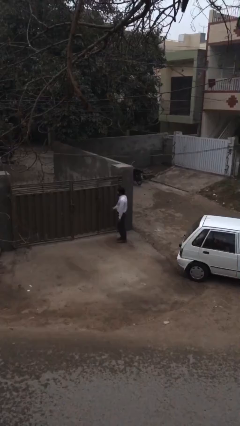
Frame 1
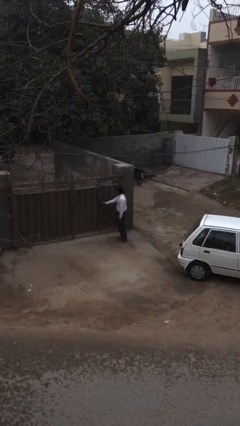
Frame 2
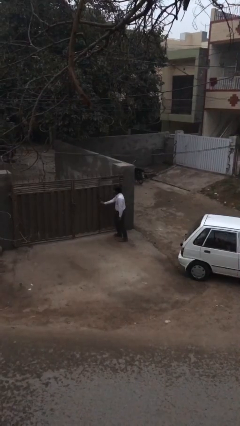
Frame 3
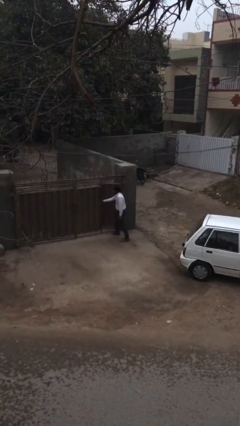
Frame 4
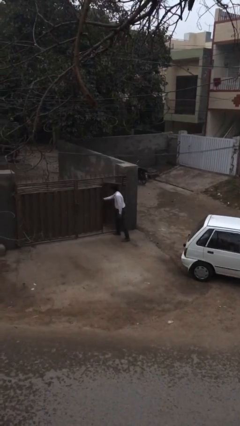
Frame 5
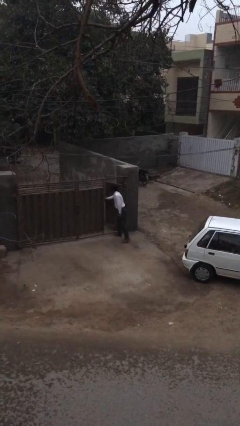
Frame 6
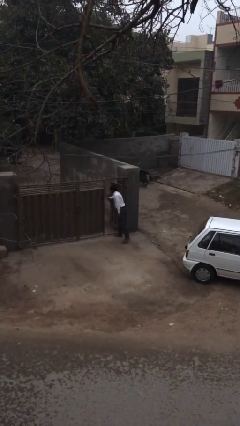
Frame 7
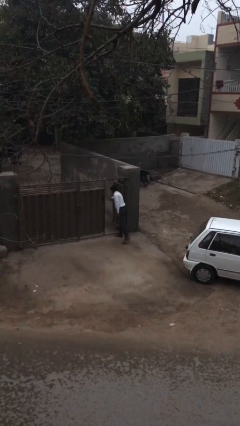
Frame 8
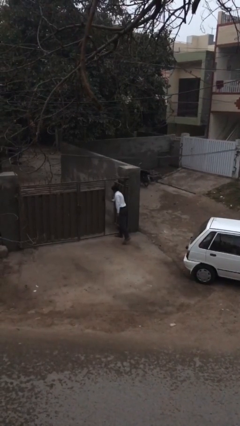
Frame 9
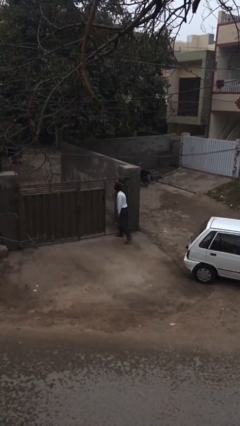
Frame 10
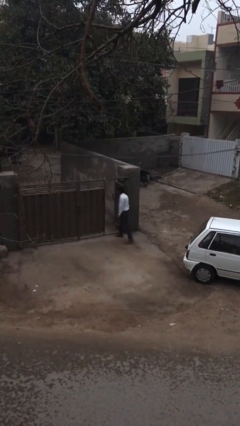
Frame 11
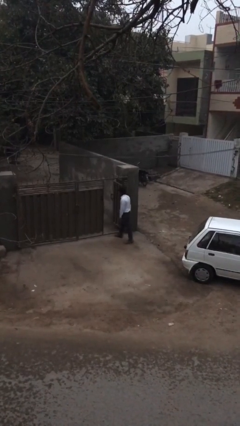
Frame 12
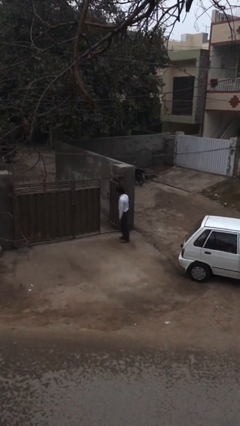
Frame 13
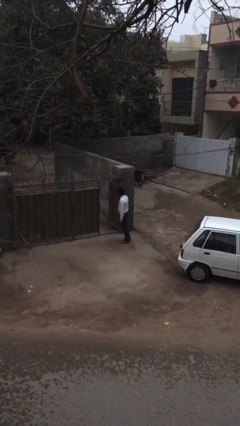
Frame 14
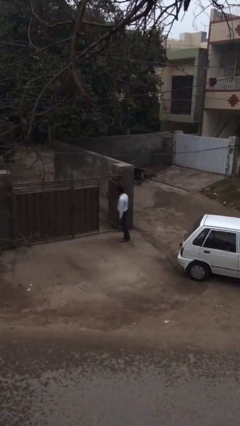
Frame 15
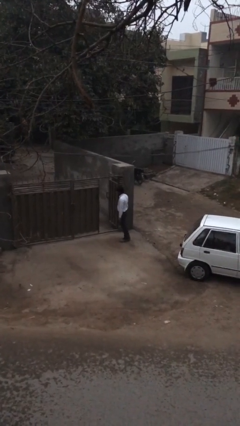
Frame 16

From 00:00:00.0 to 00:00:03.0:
person opens facility door

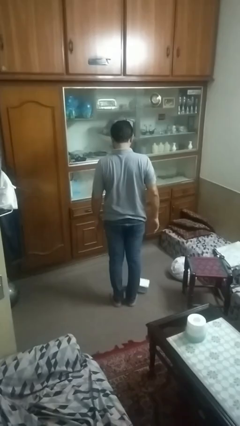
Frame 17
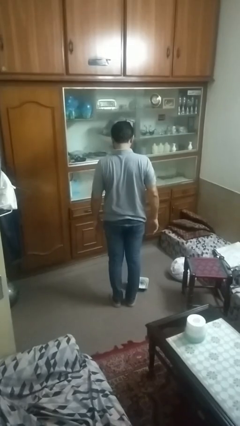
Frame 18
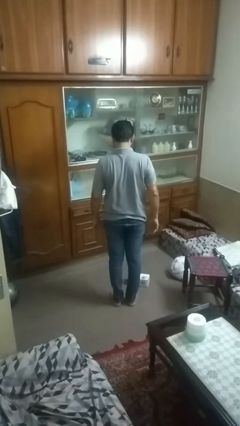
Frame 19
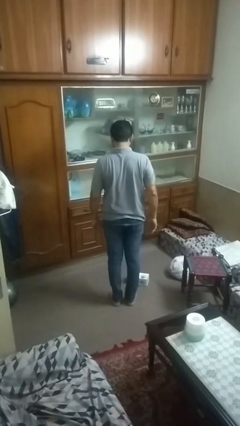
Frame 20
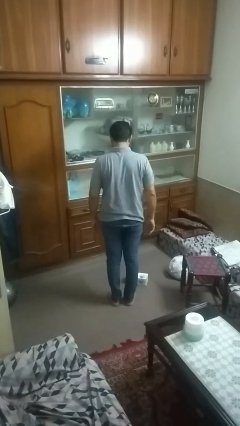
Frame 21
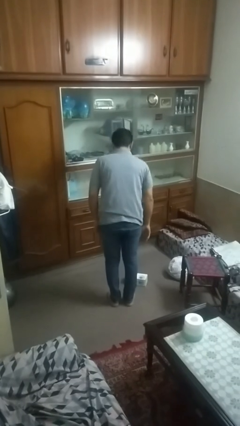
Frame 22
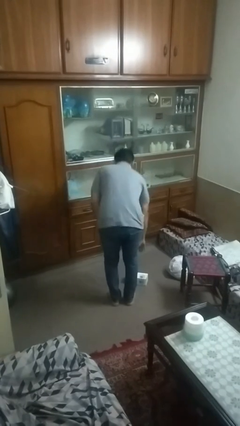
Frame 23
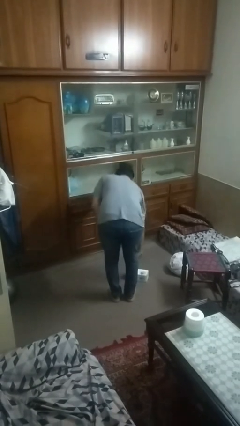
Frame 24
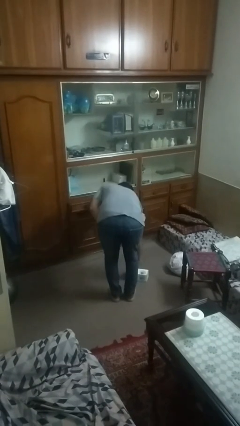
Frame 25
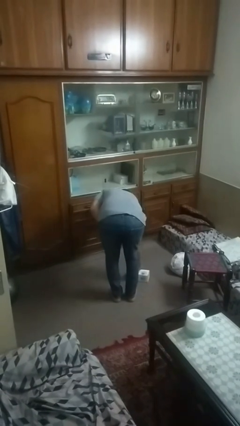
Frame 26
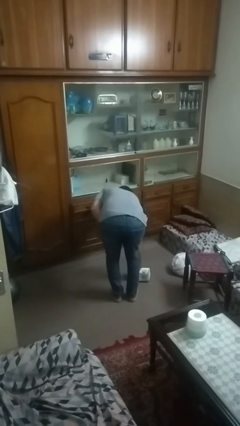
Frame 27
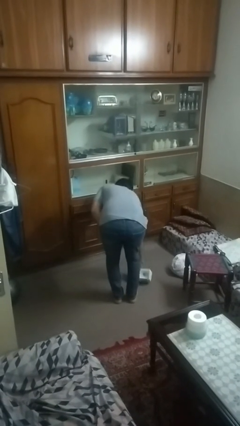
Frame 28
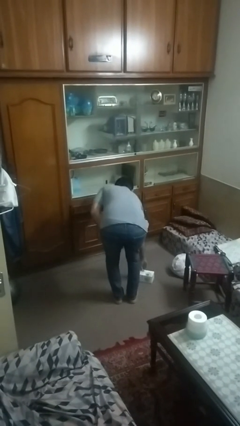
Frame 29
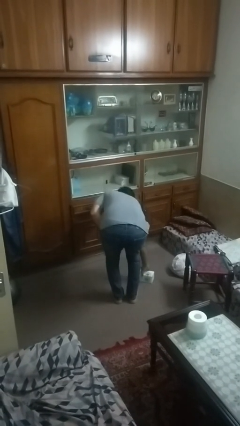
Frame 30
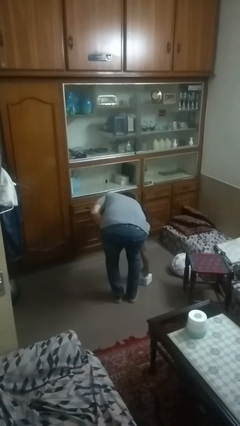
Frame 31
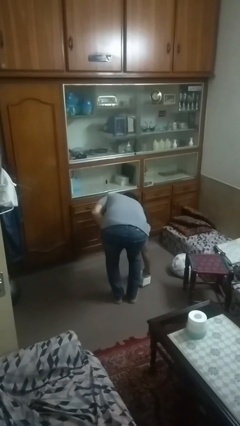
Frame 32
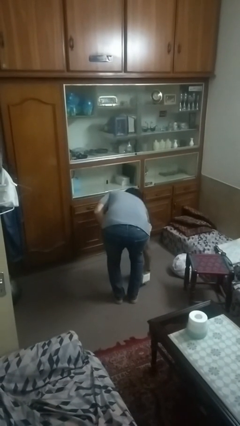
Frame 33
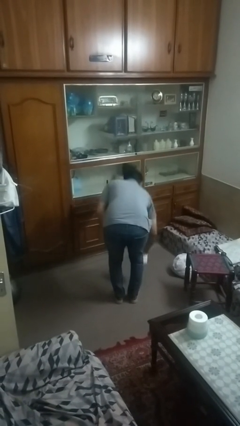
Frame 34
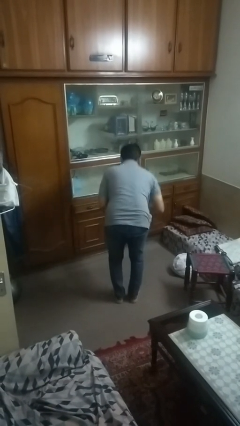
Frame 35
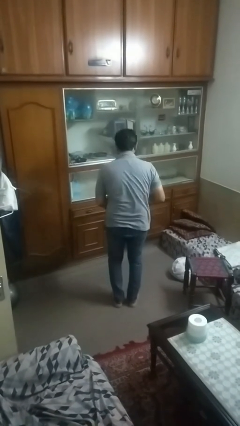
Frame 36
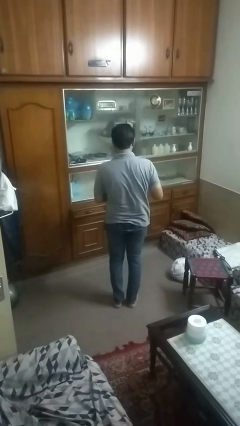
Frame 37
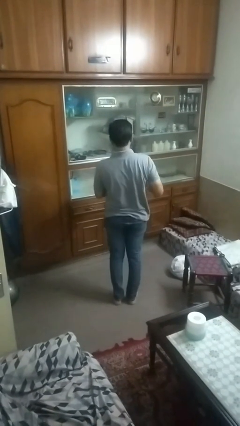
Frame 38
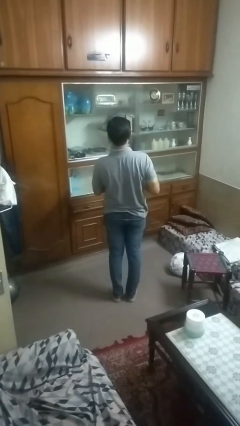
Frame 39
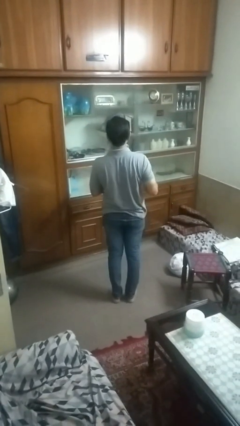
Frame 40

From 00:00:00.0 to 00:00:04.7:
person picks up object from floor

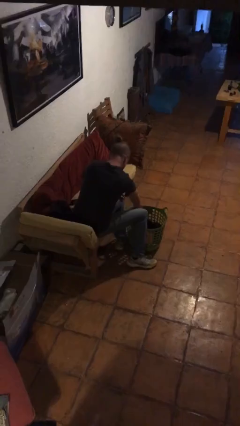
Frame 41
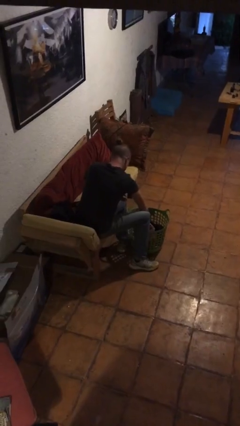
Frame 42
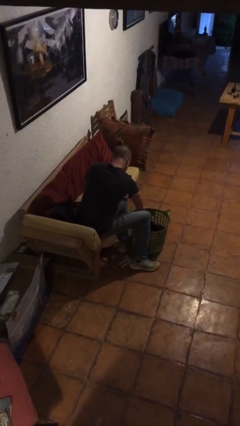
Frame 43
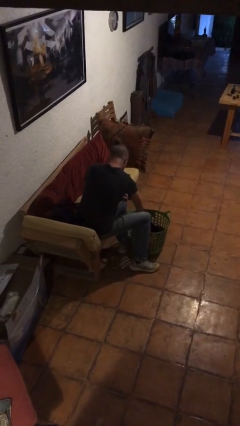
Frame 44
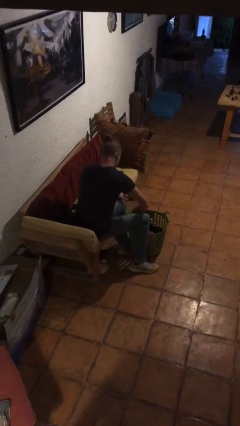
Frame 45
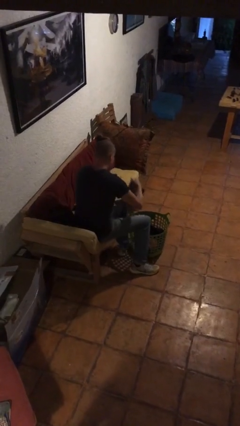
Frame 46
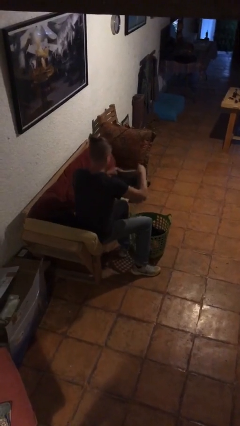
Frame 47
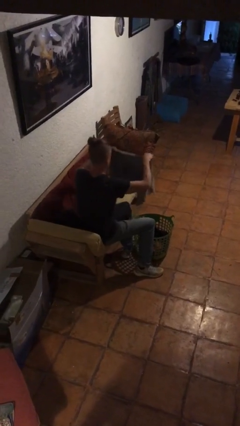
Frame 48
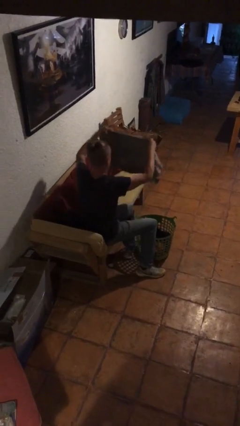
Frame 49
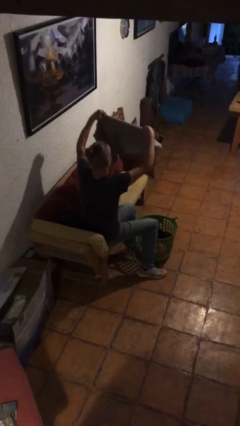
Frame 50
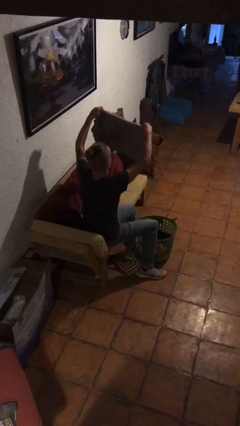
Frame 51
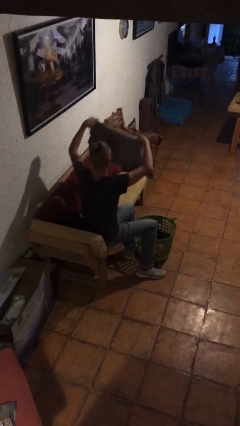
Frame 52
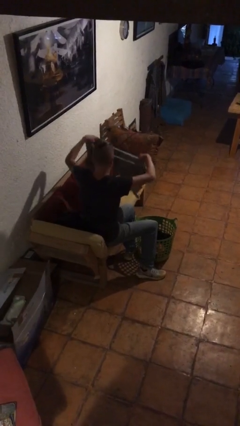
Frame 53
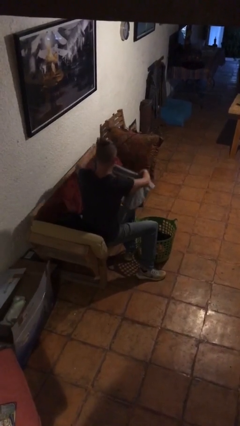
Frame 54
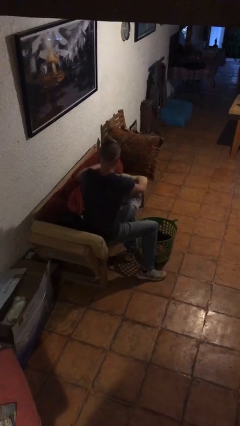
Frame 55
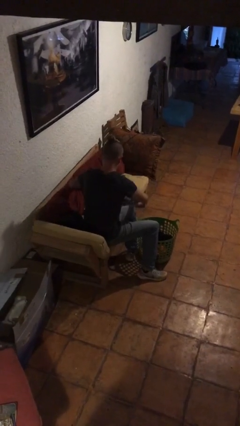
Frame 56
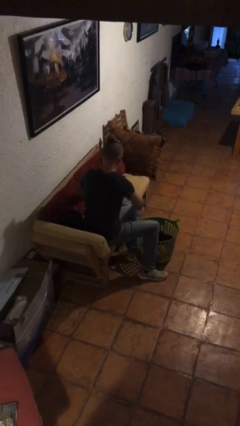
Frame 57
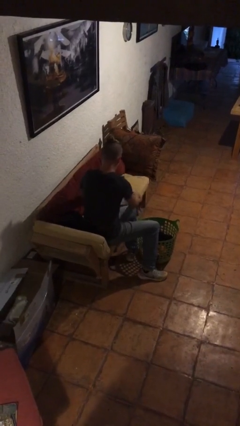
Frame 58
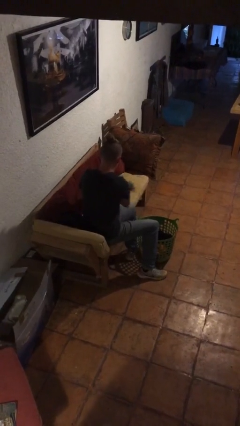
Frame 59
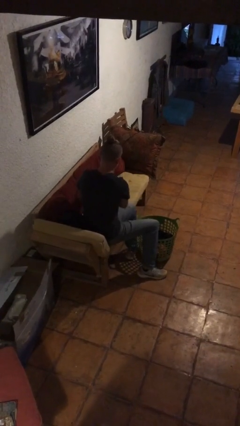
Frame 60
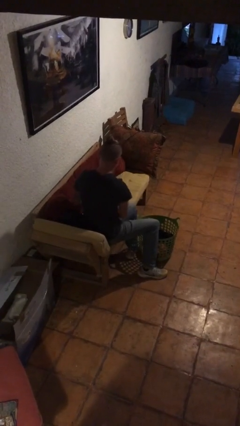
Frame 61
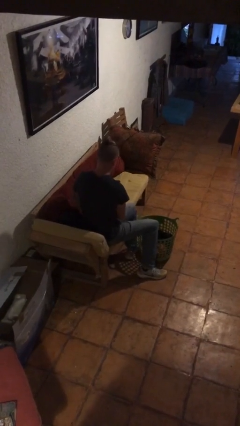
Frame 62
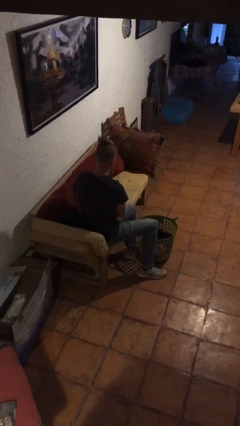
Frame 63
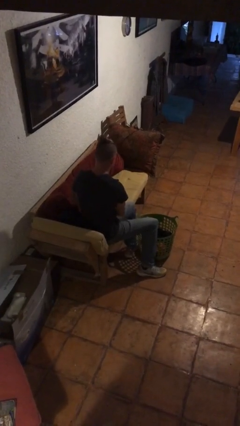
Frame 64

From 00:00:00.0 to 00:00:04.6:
person folds shirt

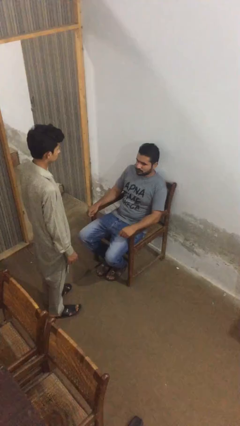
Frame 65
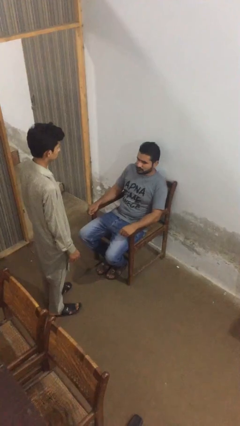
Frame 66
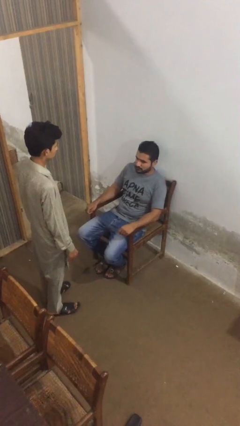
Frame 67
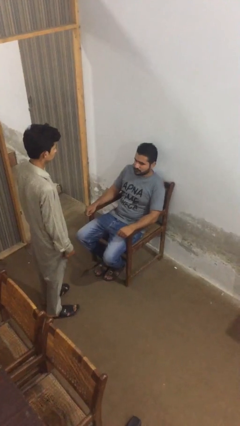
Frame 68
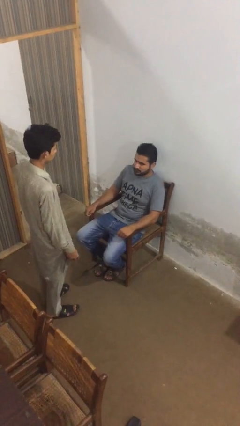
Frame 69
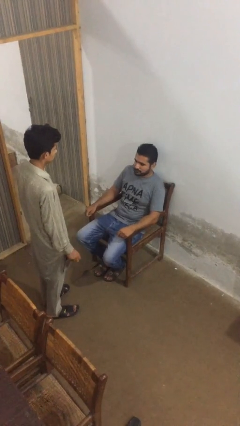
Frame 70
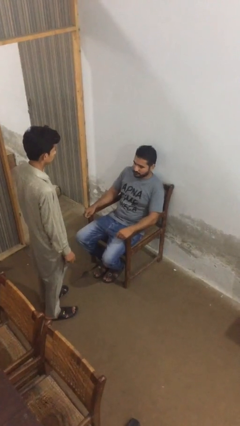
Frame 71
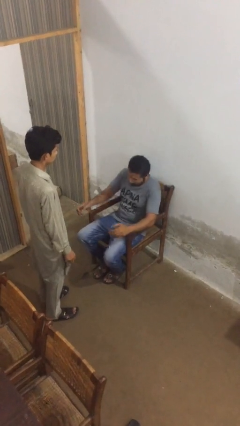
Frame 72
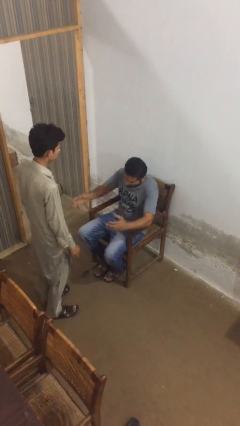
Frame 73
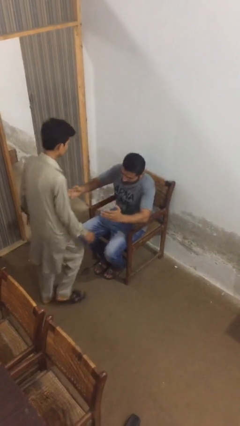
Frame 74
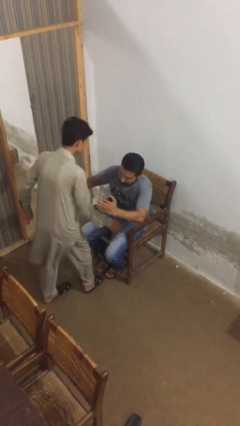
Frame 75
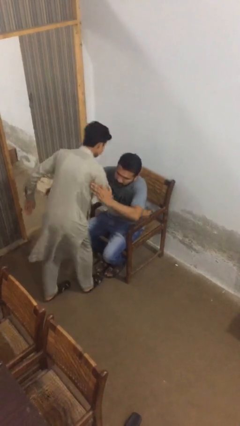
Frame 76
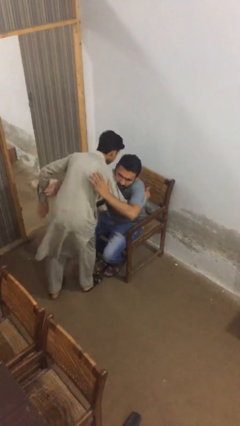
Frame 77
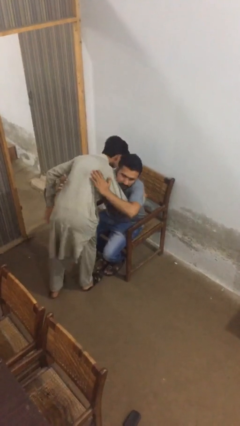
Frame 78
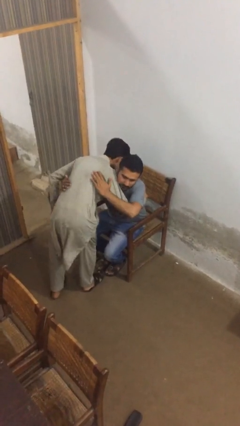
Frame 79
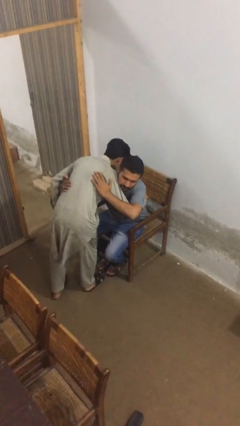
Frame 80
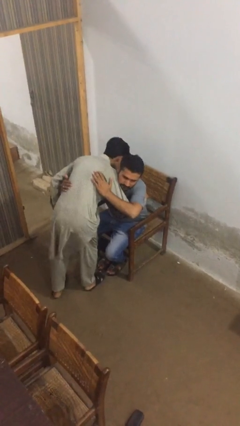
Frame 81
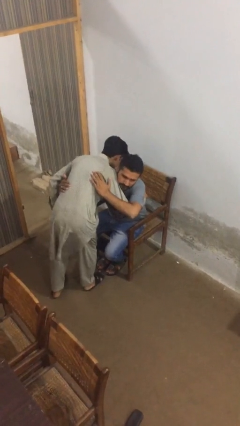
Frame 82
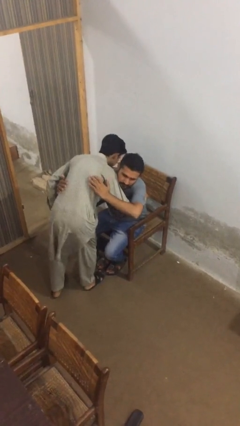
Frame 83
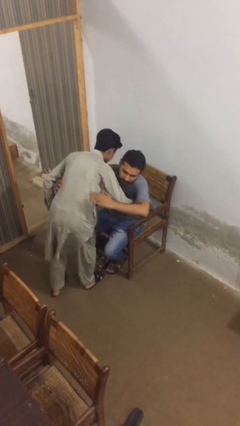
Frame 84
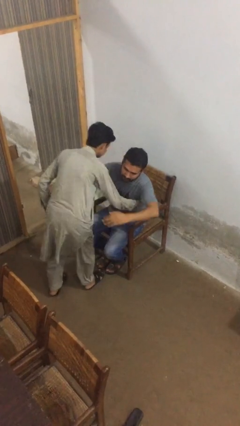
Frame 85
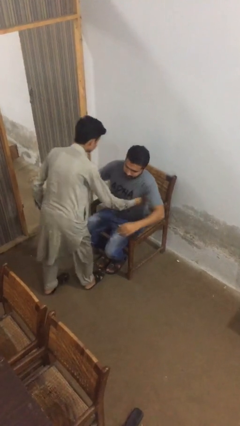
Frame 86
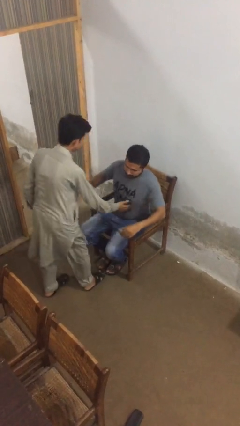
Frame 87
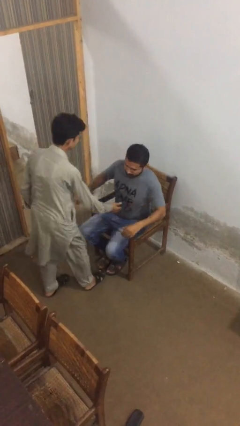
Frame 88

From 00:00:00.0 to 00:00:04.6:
person embraces person

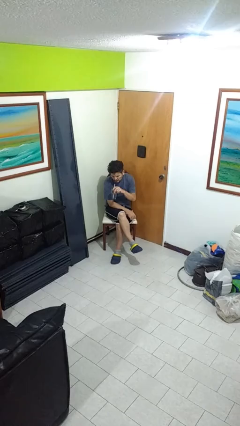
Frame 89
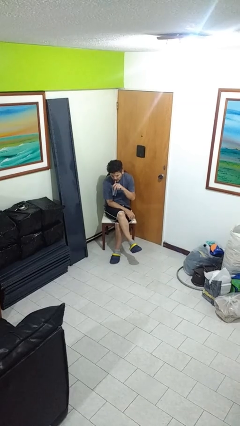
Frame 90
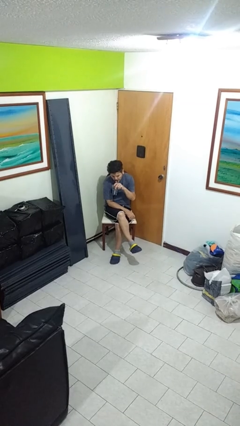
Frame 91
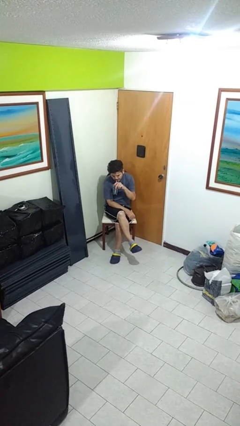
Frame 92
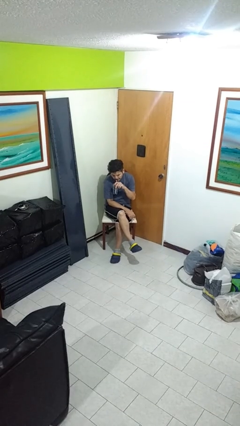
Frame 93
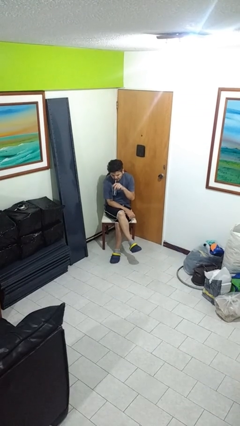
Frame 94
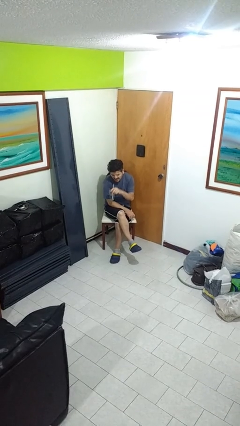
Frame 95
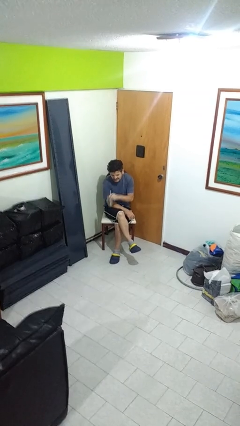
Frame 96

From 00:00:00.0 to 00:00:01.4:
person drinks from straw
